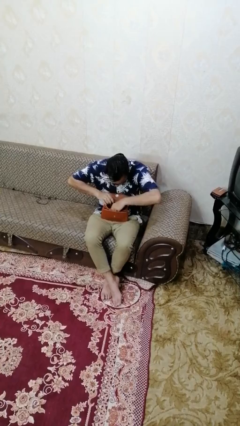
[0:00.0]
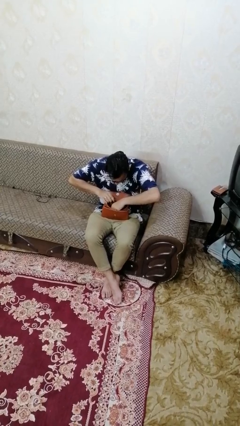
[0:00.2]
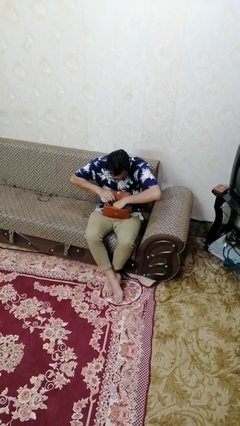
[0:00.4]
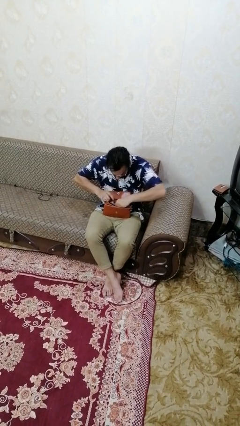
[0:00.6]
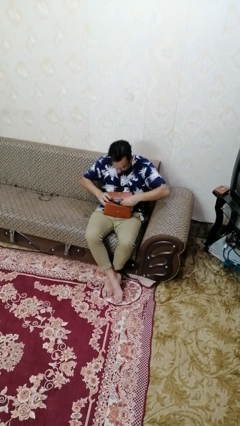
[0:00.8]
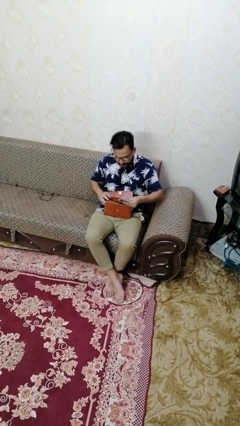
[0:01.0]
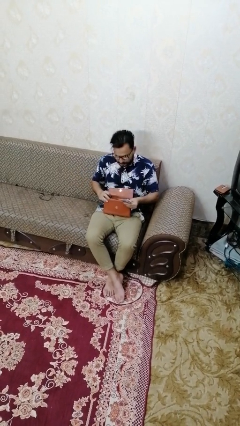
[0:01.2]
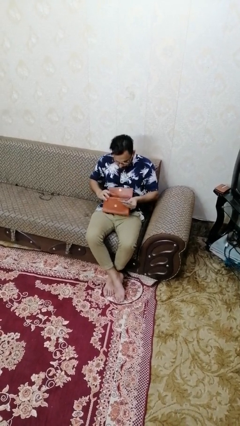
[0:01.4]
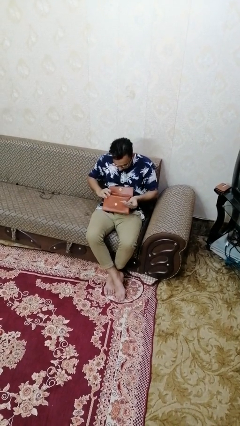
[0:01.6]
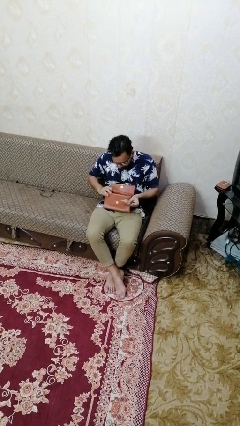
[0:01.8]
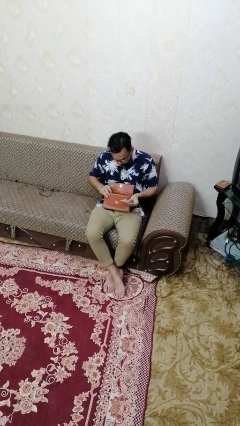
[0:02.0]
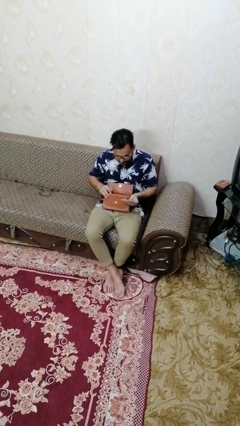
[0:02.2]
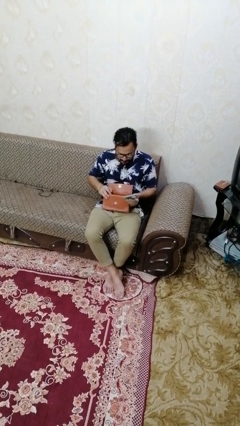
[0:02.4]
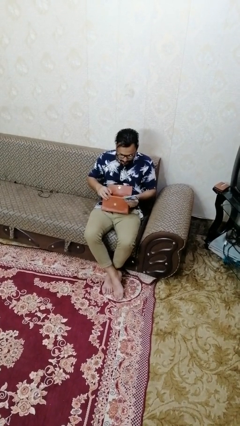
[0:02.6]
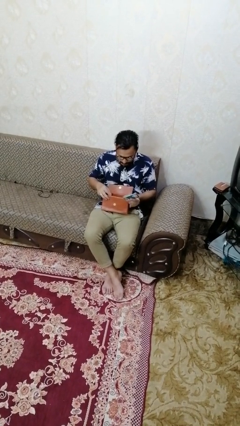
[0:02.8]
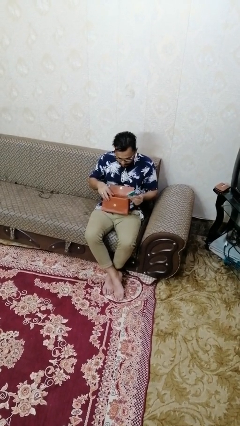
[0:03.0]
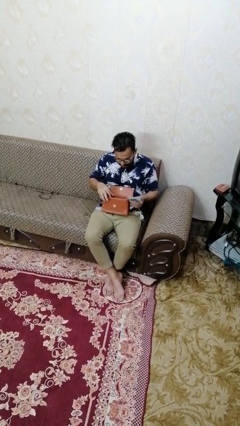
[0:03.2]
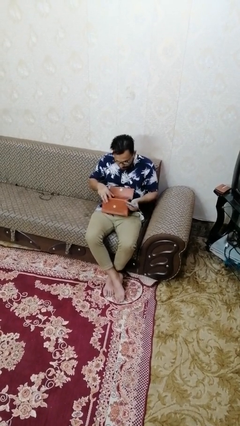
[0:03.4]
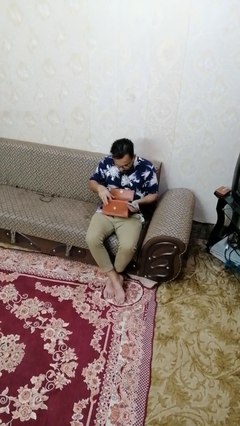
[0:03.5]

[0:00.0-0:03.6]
person takes object from purse

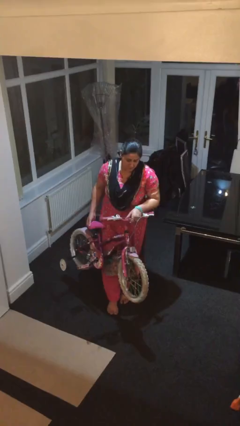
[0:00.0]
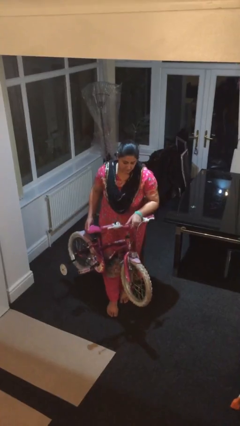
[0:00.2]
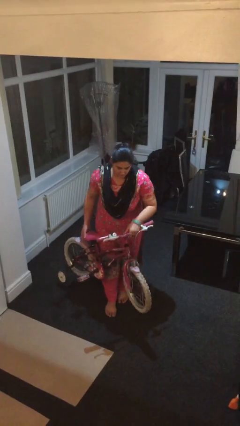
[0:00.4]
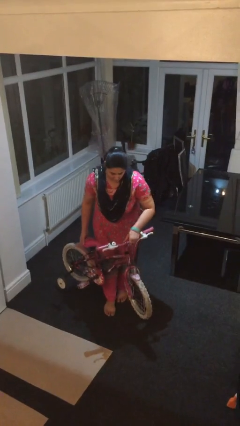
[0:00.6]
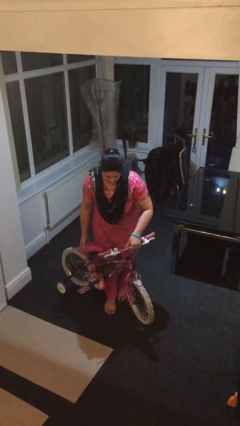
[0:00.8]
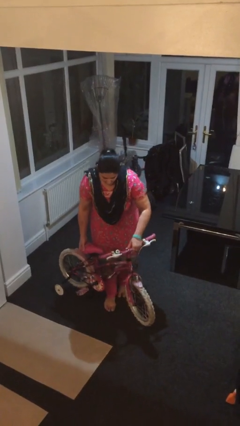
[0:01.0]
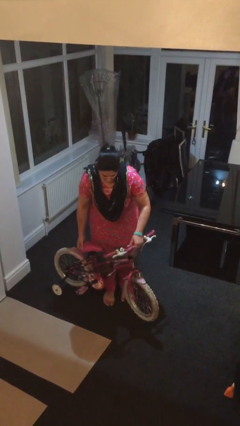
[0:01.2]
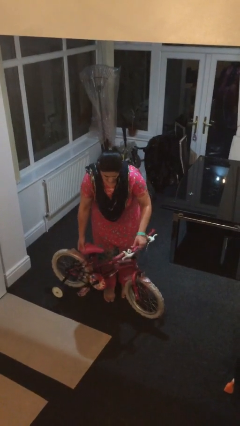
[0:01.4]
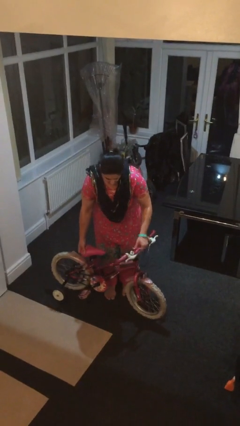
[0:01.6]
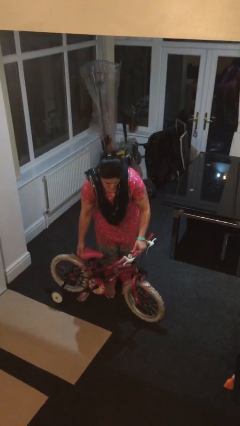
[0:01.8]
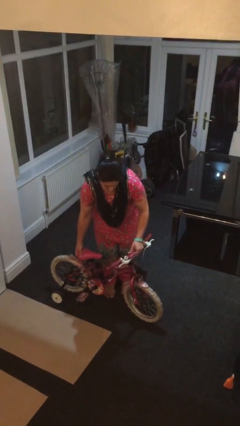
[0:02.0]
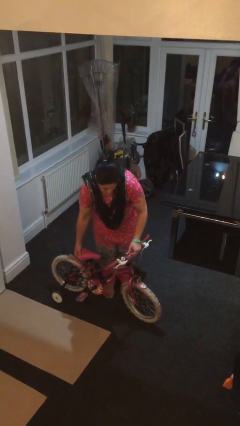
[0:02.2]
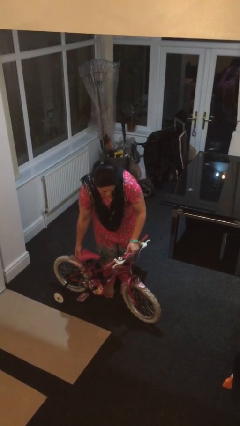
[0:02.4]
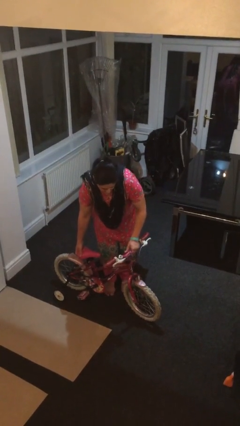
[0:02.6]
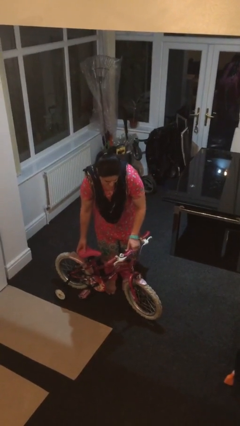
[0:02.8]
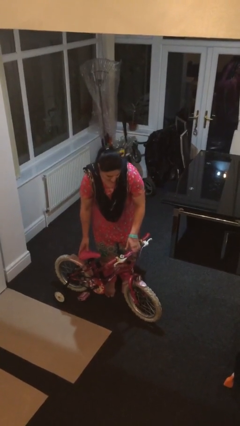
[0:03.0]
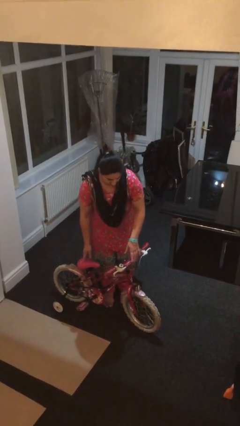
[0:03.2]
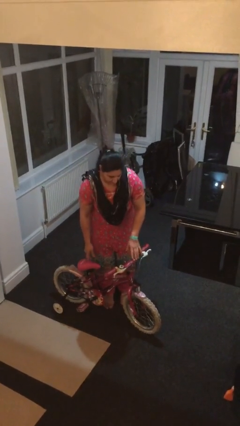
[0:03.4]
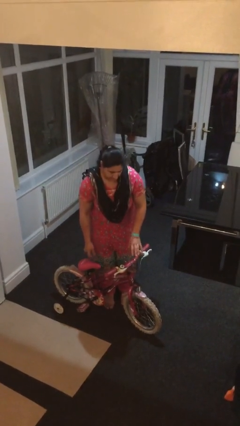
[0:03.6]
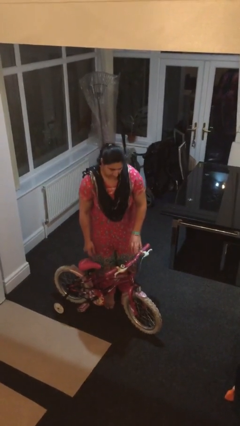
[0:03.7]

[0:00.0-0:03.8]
person puts down object on floor

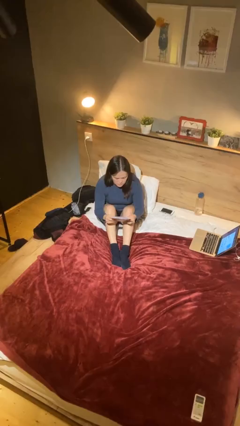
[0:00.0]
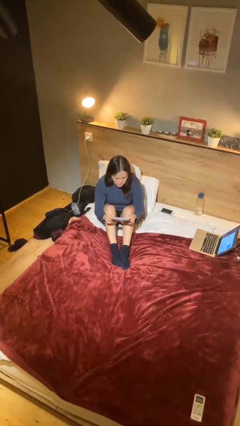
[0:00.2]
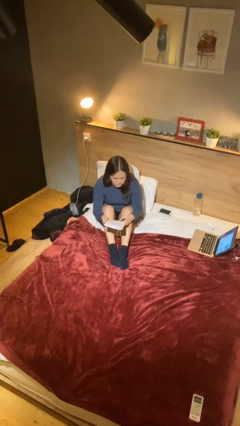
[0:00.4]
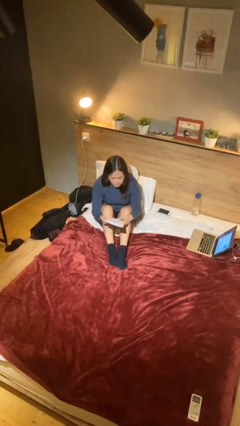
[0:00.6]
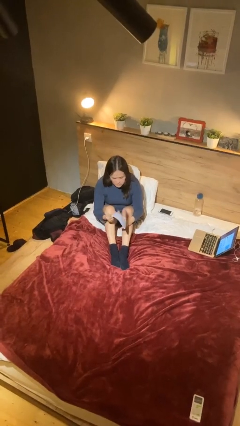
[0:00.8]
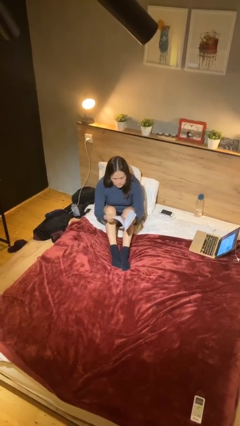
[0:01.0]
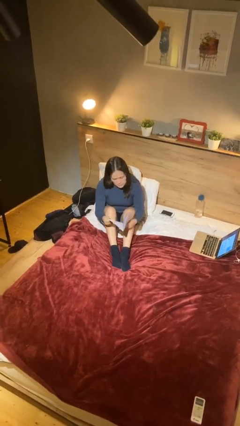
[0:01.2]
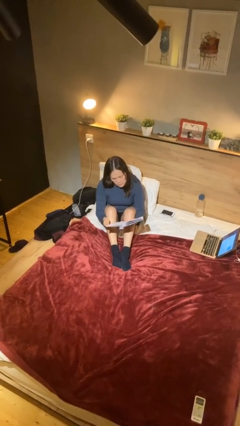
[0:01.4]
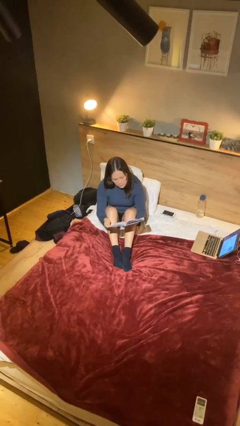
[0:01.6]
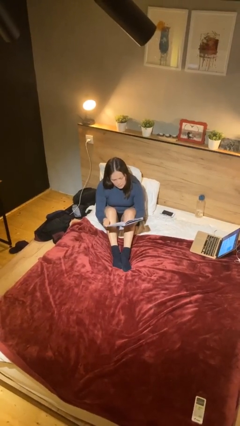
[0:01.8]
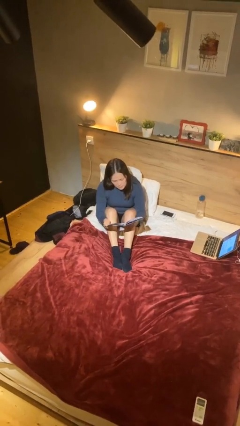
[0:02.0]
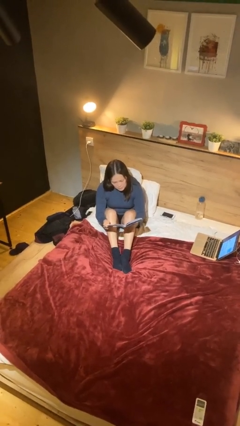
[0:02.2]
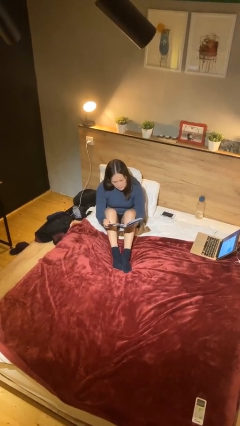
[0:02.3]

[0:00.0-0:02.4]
person reads document

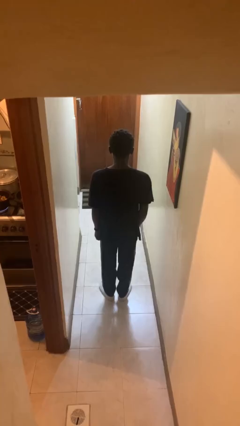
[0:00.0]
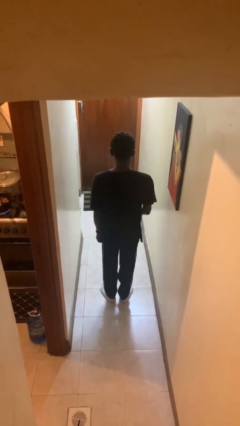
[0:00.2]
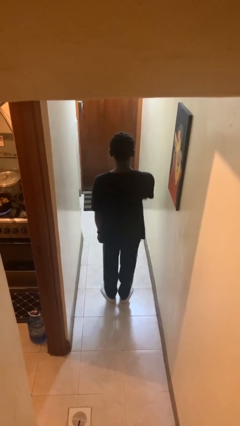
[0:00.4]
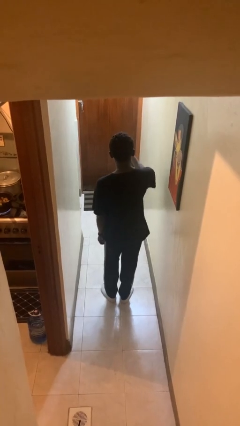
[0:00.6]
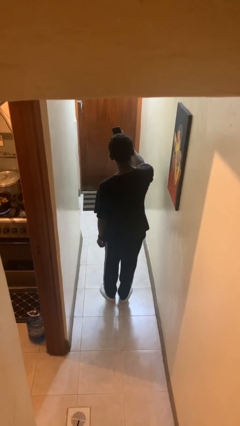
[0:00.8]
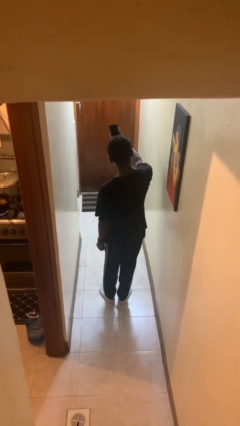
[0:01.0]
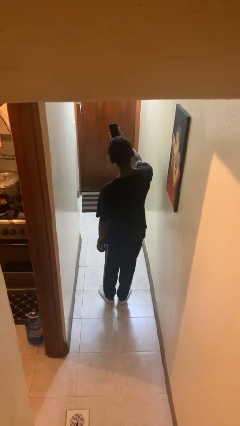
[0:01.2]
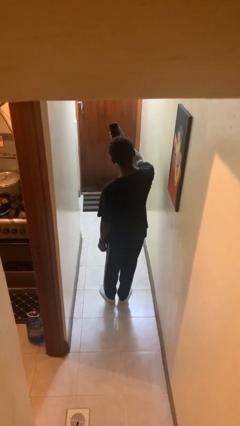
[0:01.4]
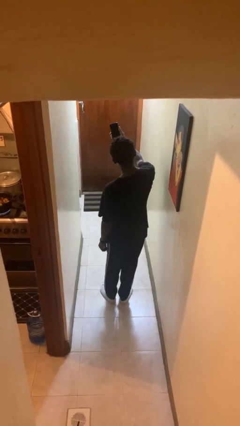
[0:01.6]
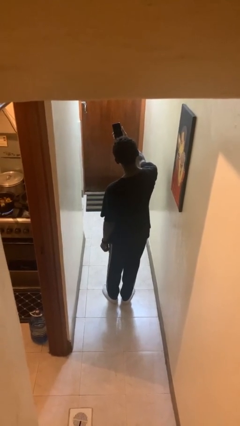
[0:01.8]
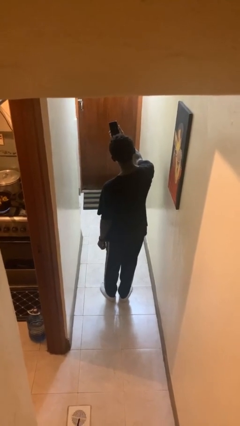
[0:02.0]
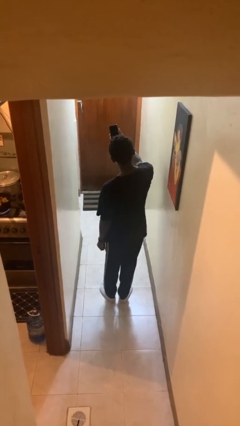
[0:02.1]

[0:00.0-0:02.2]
person takes selfie

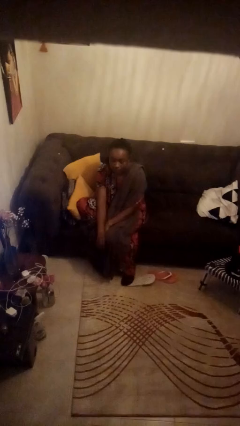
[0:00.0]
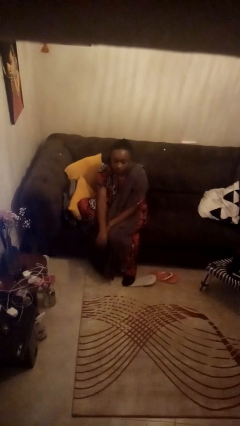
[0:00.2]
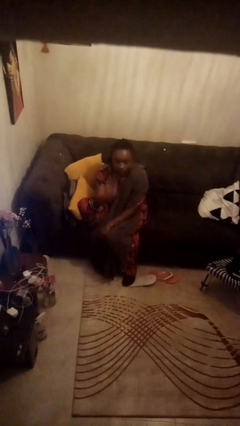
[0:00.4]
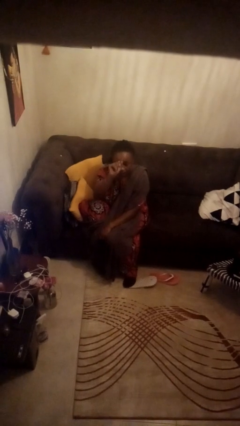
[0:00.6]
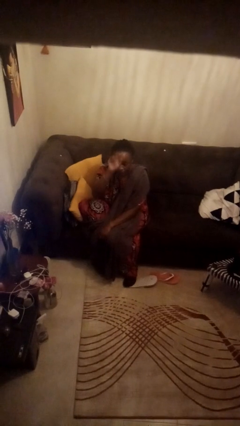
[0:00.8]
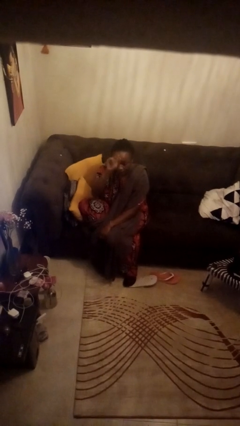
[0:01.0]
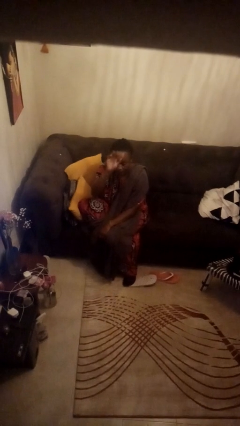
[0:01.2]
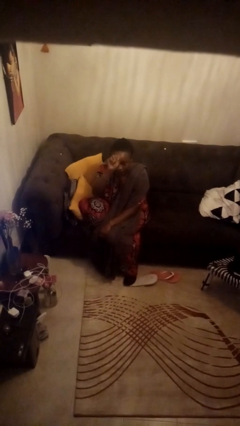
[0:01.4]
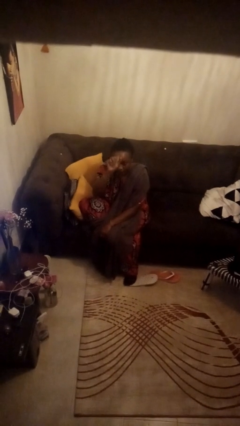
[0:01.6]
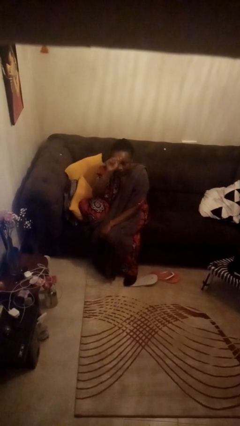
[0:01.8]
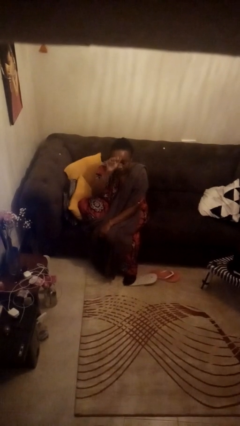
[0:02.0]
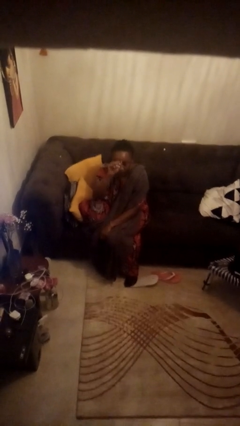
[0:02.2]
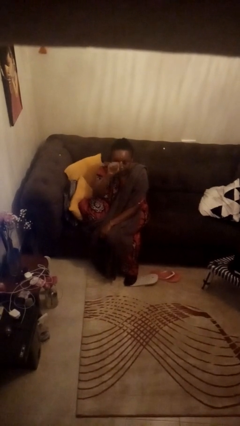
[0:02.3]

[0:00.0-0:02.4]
person gestures come here

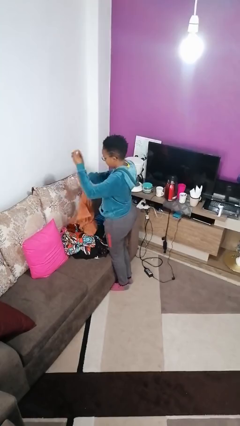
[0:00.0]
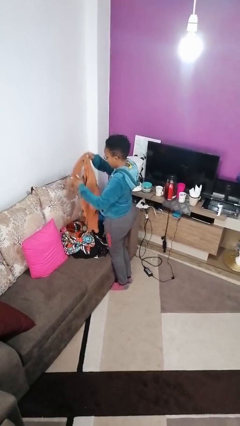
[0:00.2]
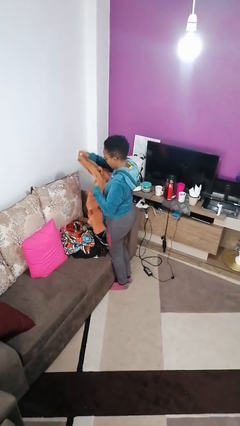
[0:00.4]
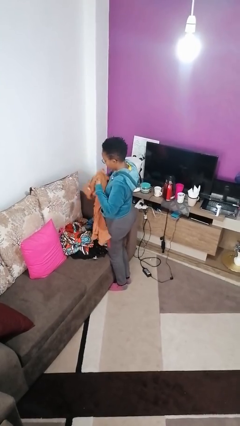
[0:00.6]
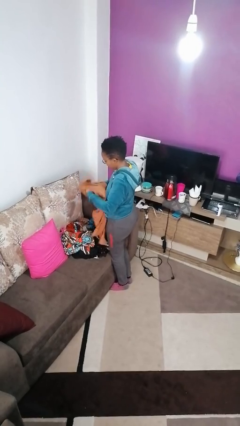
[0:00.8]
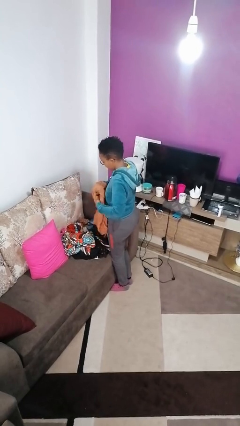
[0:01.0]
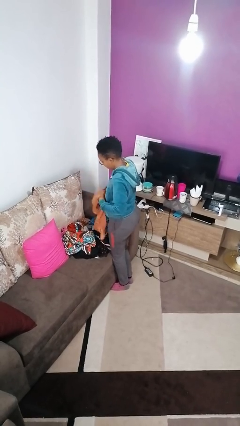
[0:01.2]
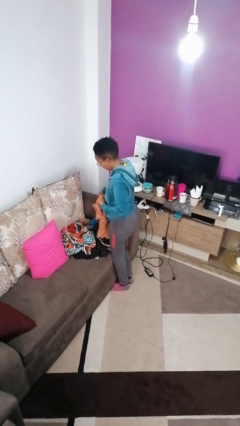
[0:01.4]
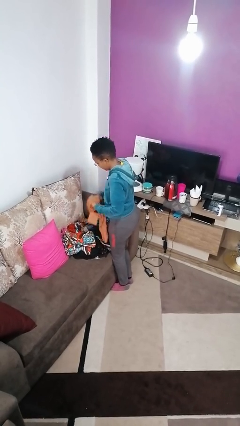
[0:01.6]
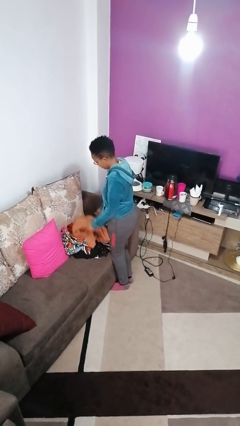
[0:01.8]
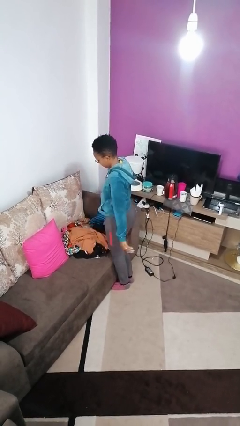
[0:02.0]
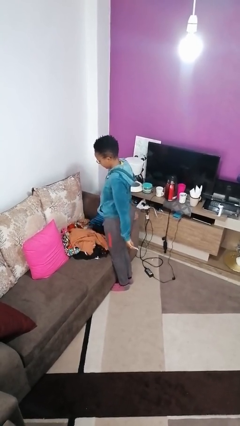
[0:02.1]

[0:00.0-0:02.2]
person folds shirt

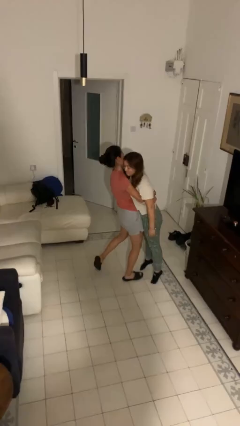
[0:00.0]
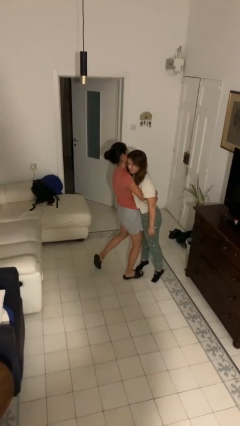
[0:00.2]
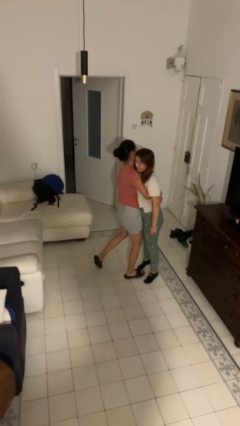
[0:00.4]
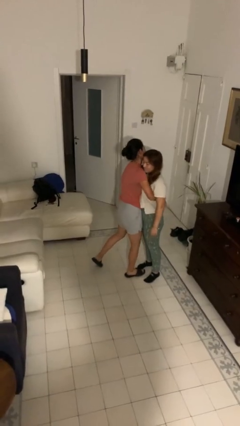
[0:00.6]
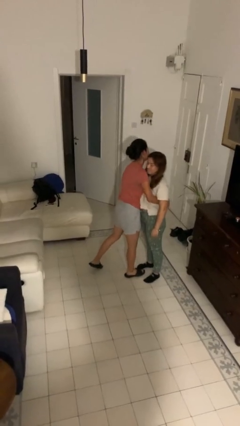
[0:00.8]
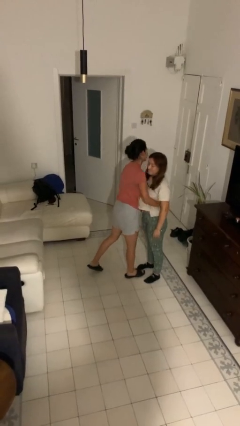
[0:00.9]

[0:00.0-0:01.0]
person puts down person
